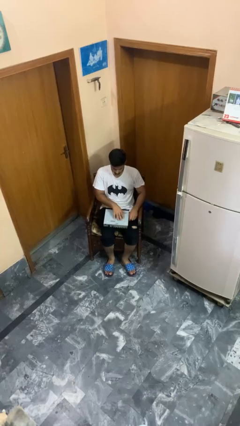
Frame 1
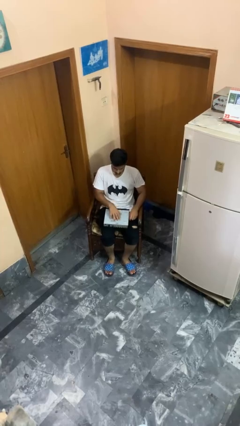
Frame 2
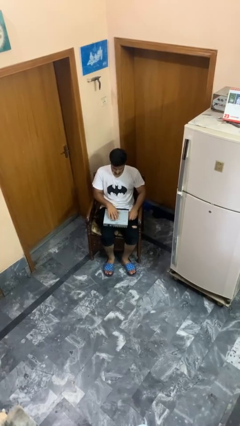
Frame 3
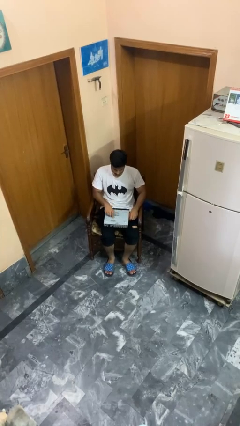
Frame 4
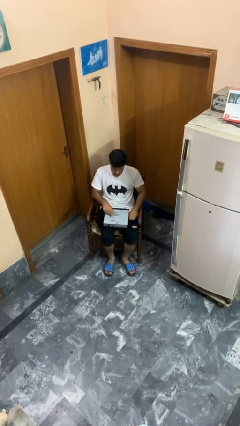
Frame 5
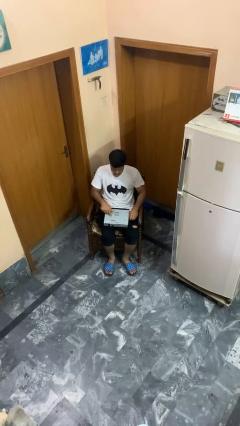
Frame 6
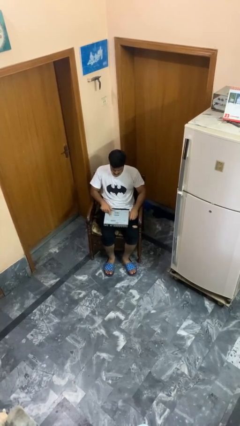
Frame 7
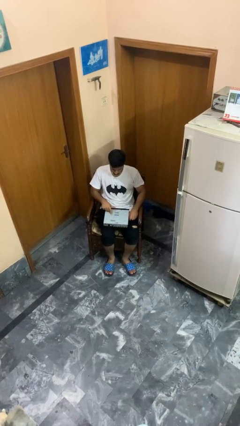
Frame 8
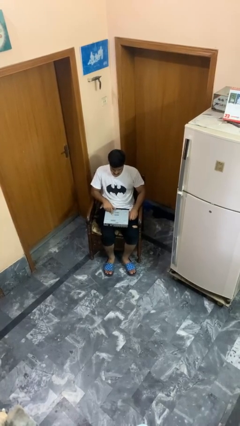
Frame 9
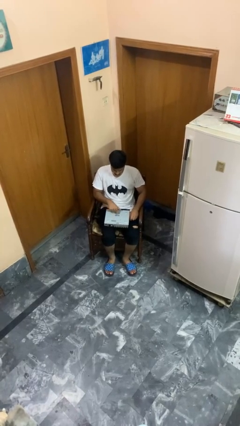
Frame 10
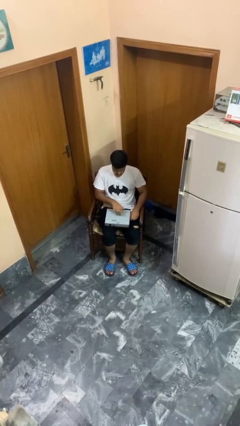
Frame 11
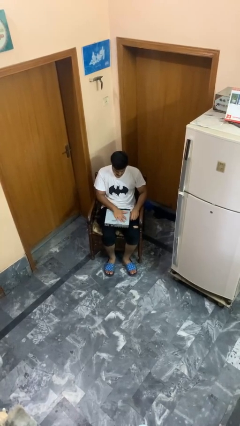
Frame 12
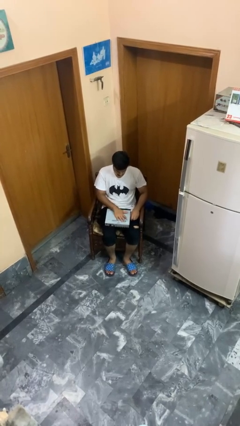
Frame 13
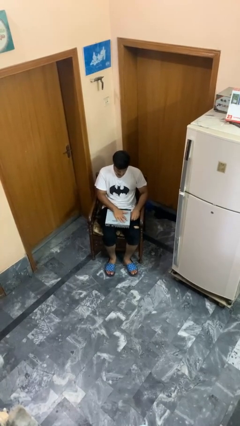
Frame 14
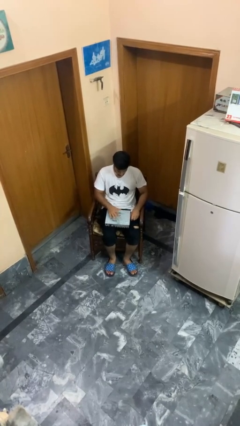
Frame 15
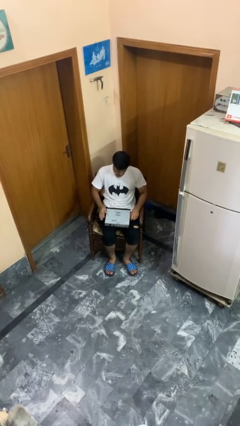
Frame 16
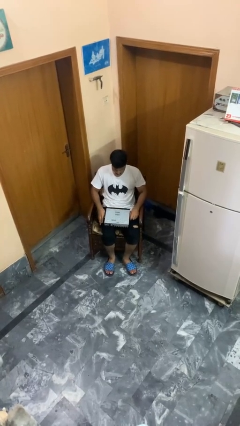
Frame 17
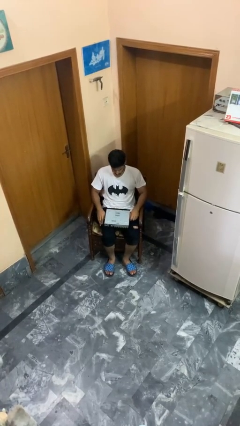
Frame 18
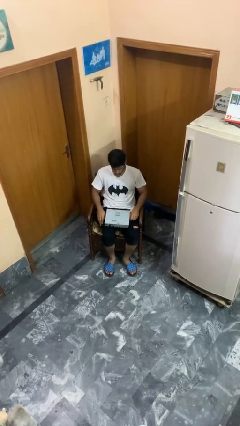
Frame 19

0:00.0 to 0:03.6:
person taps object with finger

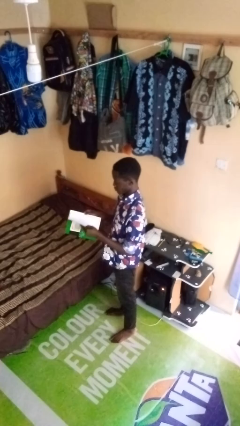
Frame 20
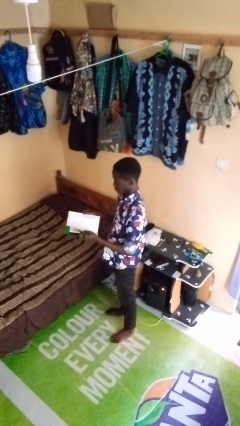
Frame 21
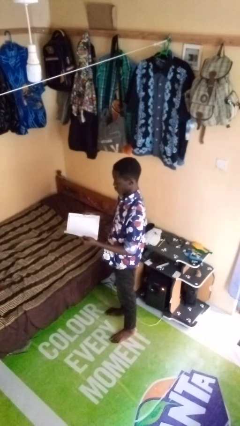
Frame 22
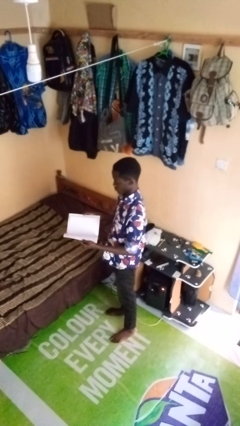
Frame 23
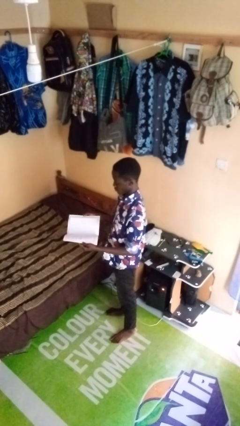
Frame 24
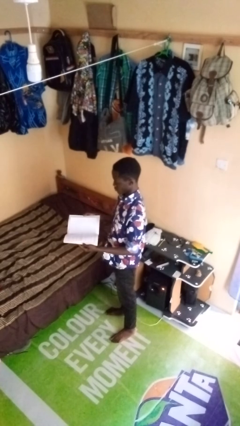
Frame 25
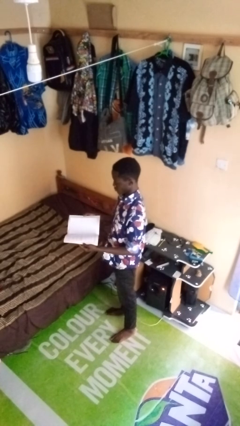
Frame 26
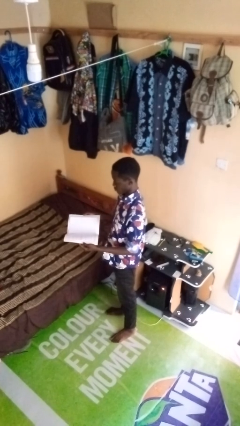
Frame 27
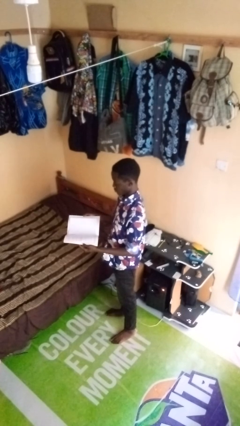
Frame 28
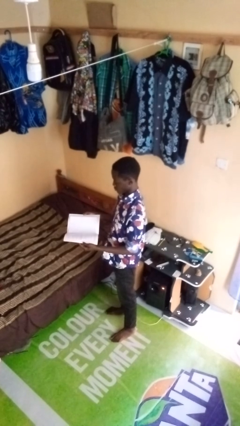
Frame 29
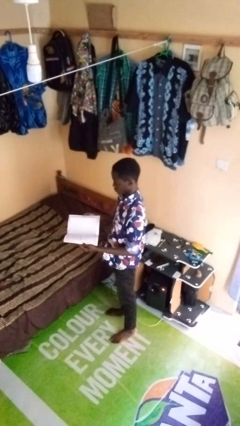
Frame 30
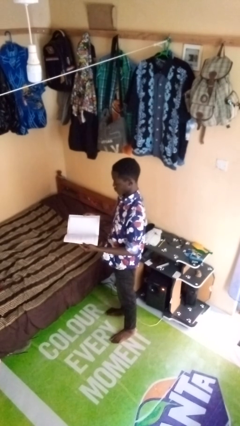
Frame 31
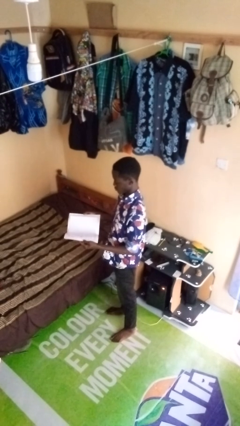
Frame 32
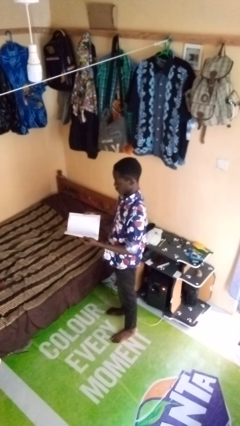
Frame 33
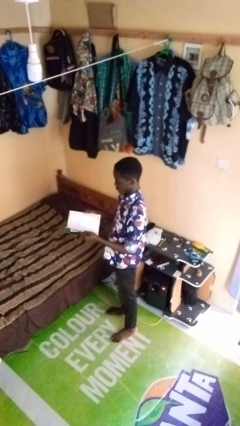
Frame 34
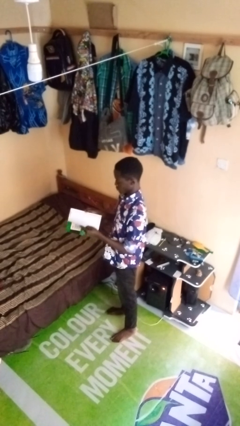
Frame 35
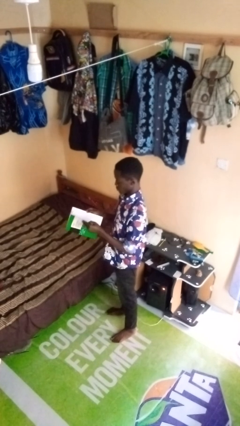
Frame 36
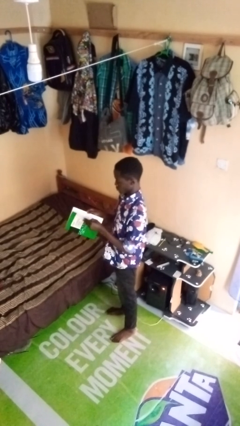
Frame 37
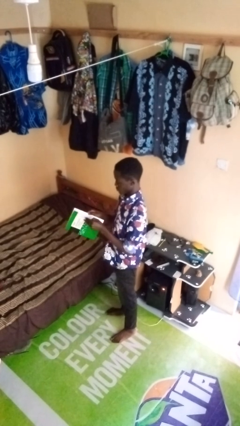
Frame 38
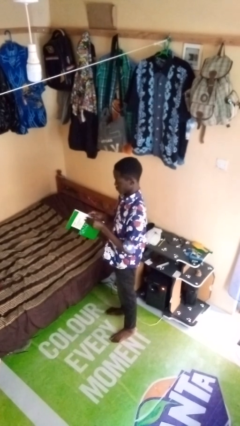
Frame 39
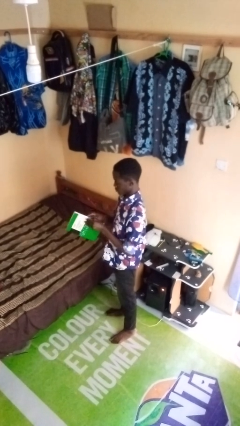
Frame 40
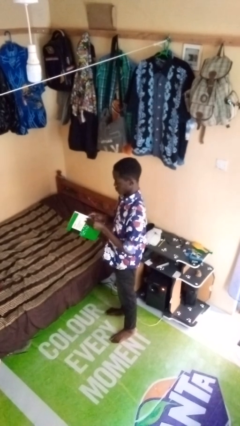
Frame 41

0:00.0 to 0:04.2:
person reads magazine

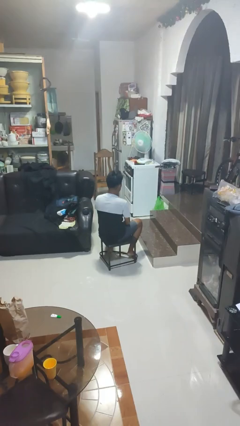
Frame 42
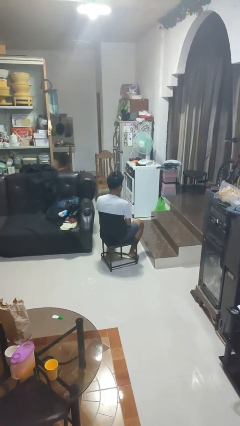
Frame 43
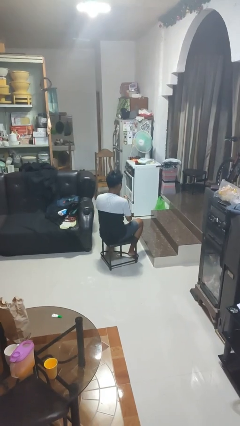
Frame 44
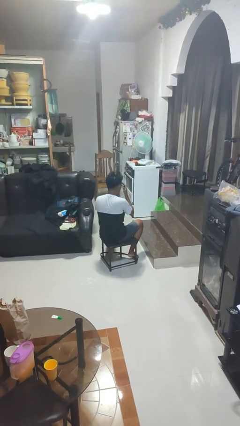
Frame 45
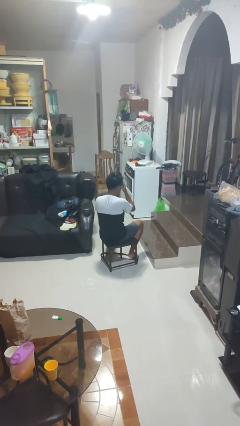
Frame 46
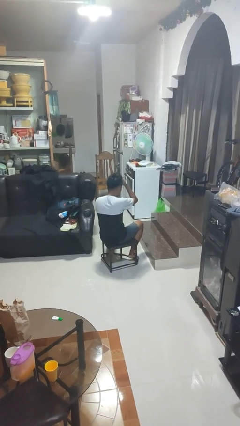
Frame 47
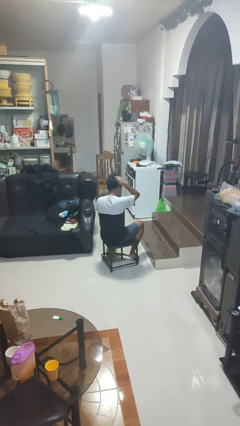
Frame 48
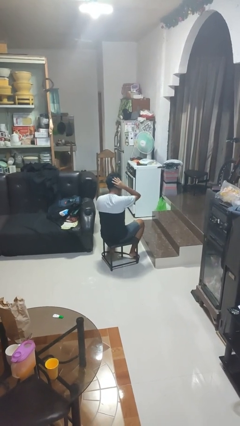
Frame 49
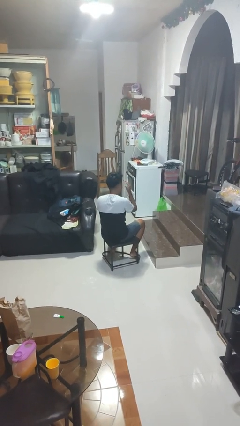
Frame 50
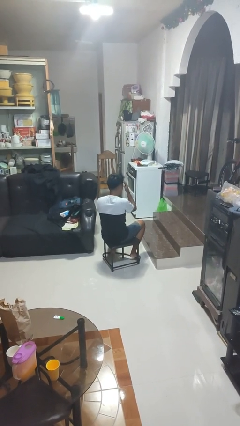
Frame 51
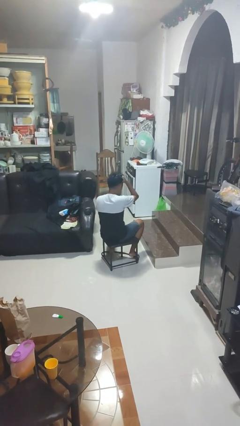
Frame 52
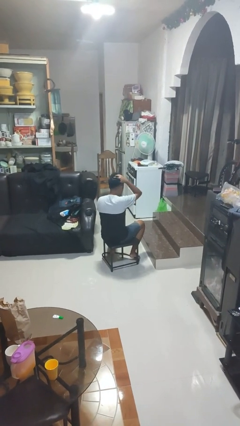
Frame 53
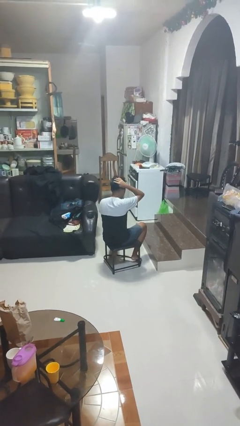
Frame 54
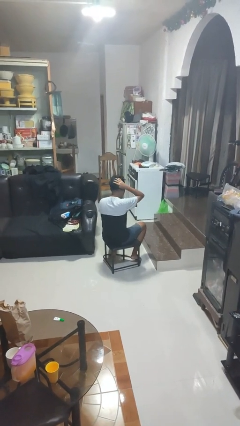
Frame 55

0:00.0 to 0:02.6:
person strokes hair

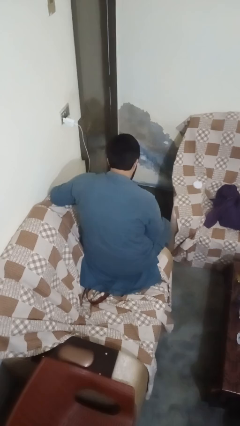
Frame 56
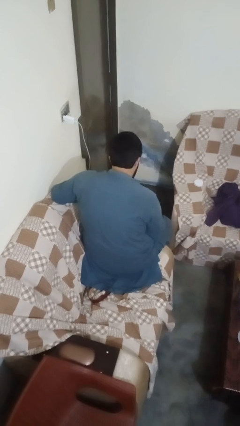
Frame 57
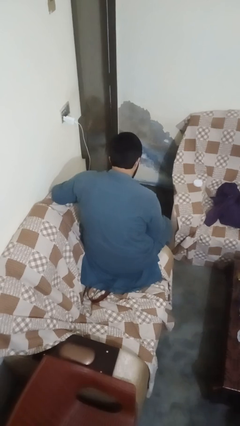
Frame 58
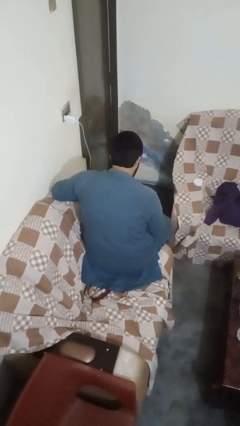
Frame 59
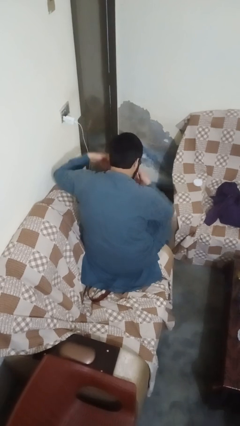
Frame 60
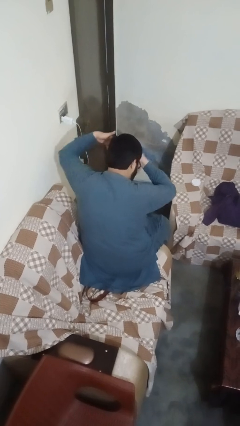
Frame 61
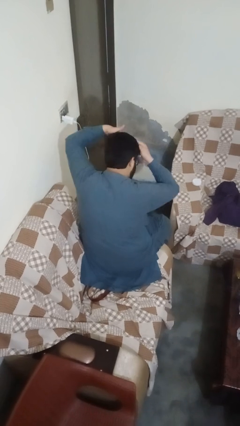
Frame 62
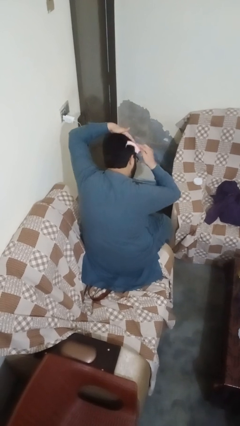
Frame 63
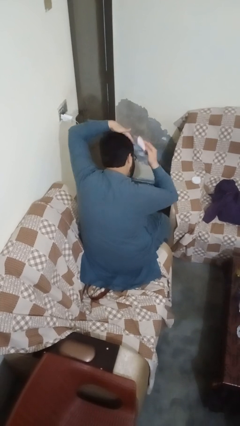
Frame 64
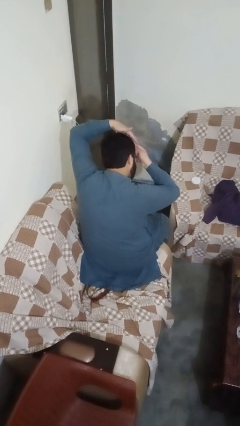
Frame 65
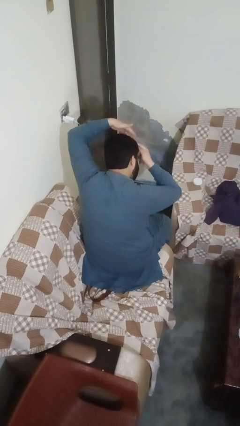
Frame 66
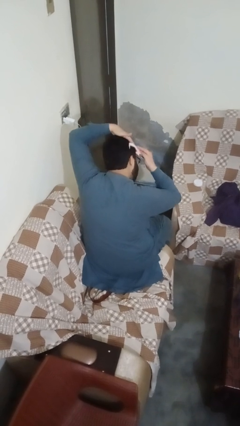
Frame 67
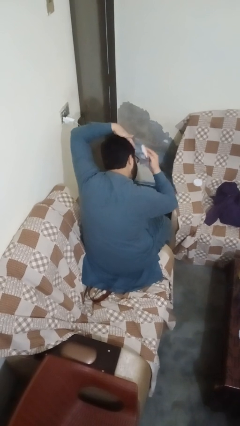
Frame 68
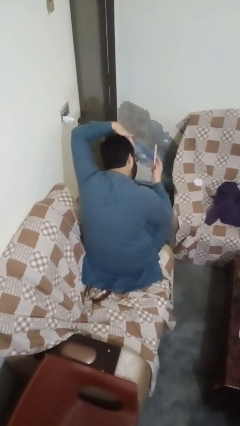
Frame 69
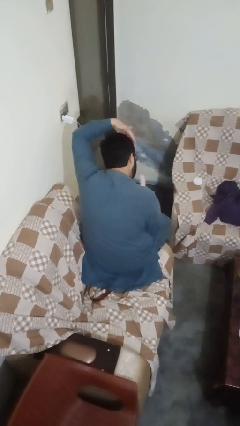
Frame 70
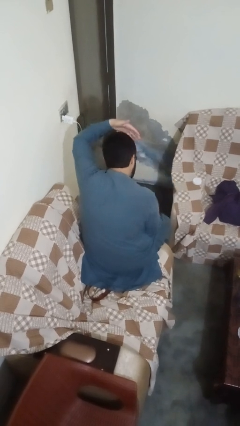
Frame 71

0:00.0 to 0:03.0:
person brushes hair

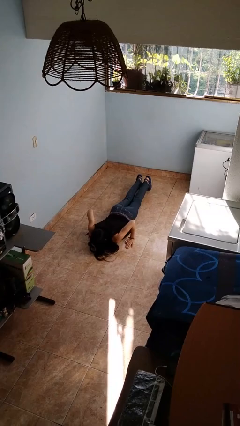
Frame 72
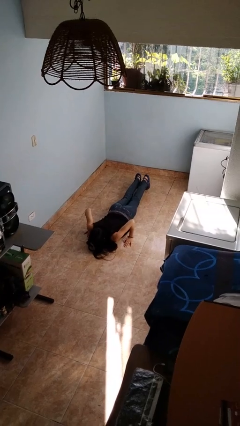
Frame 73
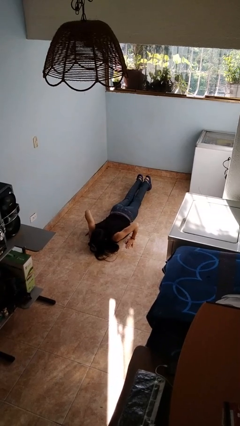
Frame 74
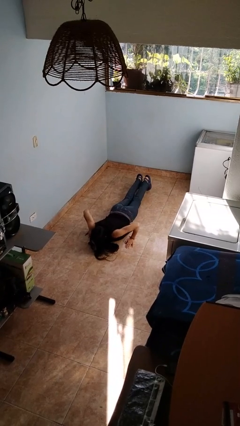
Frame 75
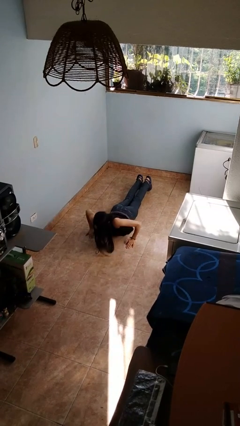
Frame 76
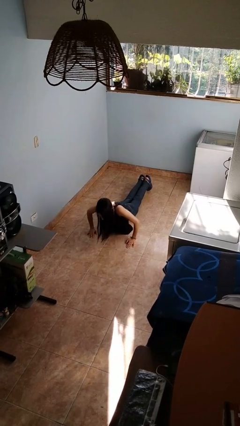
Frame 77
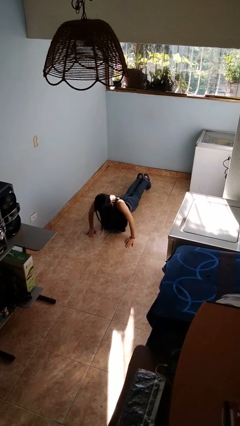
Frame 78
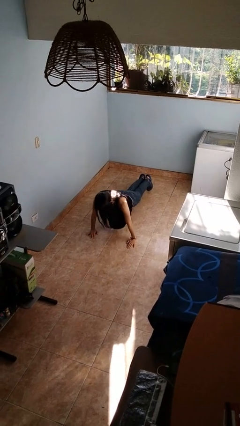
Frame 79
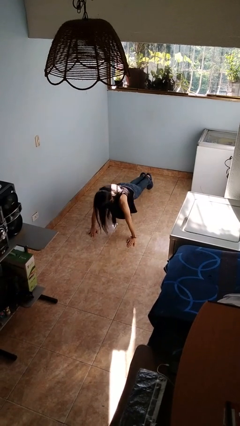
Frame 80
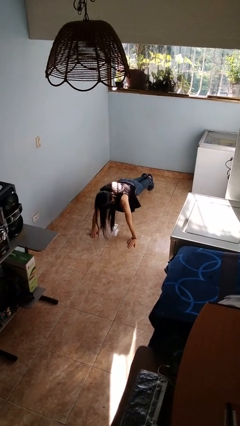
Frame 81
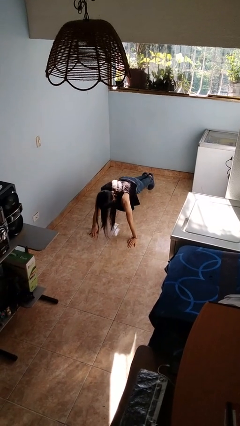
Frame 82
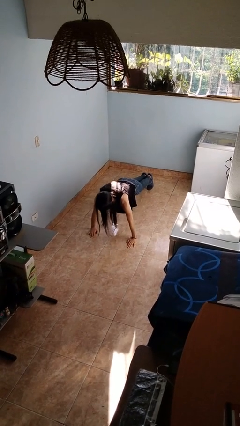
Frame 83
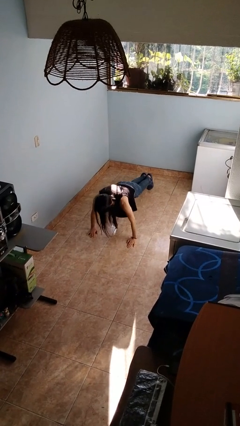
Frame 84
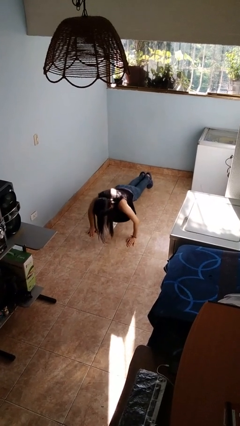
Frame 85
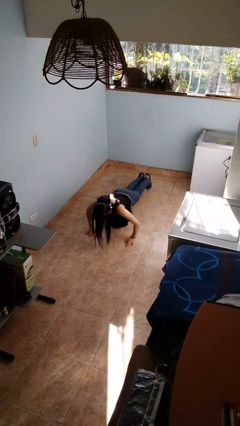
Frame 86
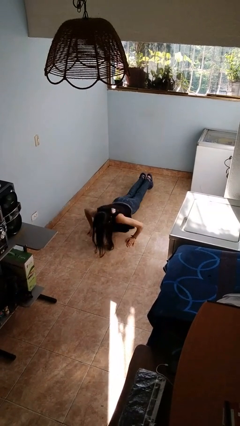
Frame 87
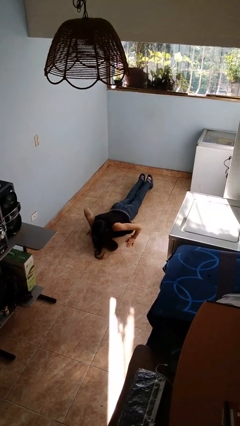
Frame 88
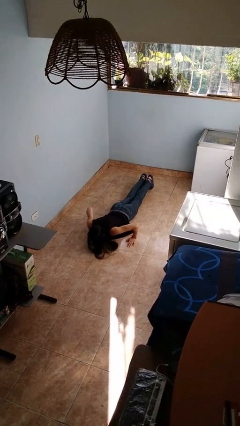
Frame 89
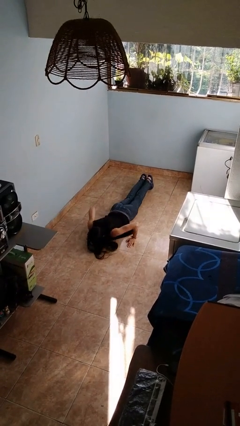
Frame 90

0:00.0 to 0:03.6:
person exercises with pushup

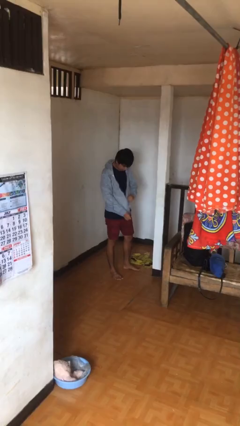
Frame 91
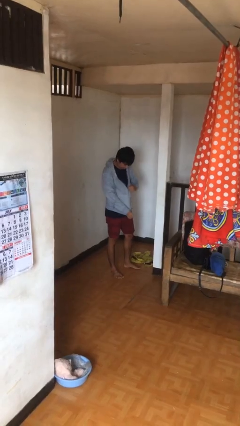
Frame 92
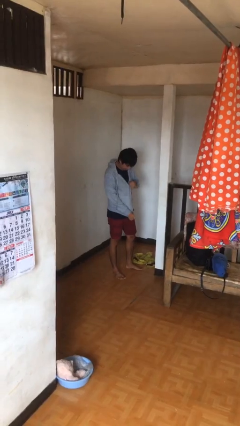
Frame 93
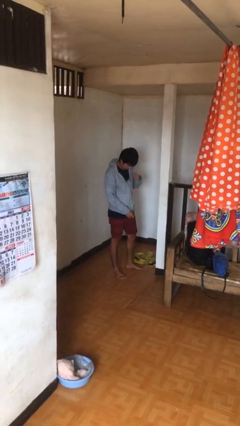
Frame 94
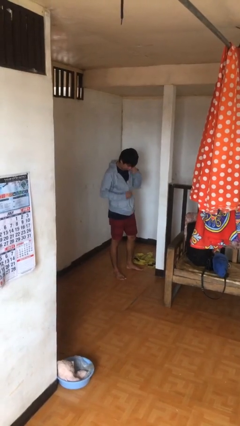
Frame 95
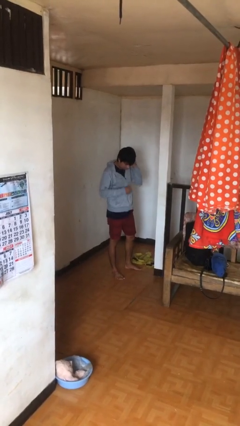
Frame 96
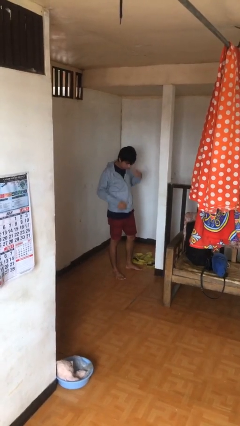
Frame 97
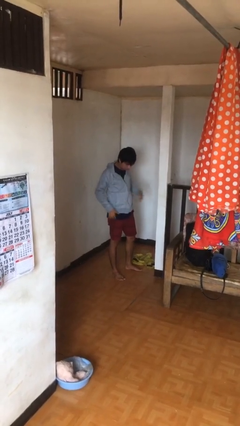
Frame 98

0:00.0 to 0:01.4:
person zips up jacket
